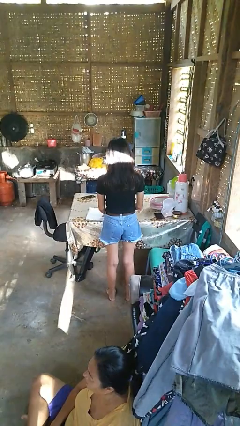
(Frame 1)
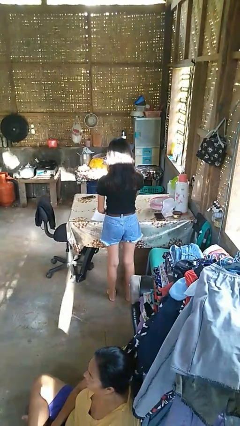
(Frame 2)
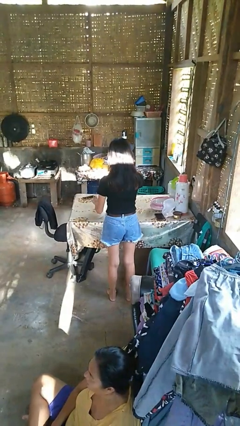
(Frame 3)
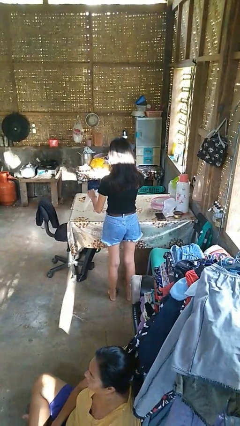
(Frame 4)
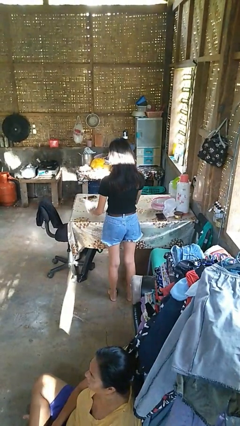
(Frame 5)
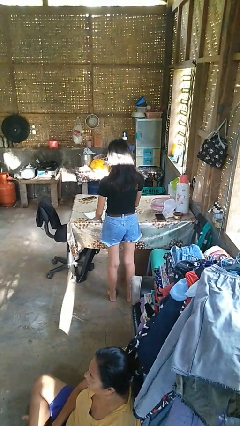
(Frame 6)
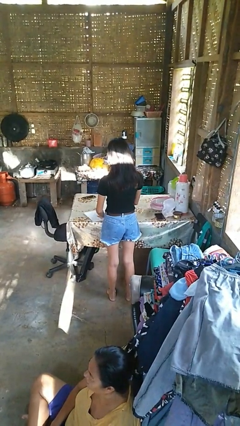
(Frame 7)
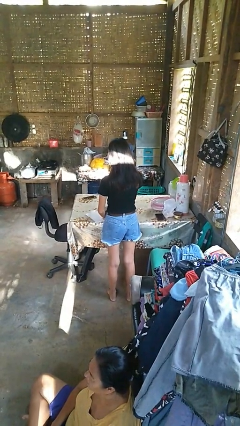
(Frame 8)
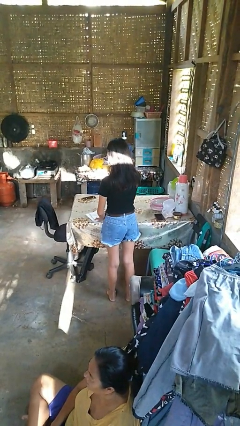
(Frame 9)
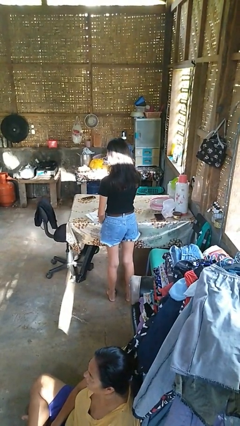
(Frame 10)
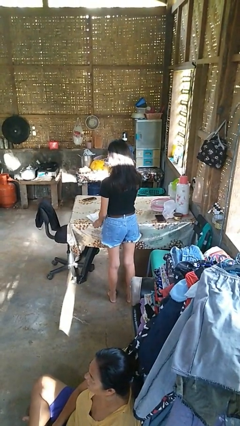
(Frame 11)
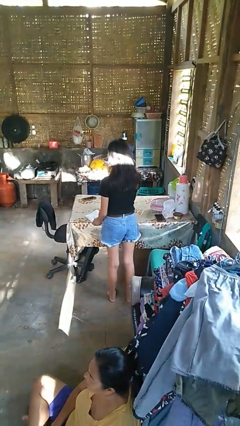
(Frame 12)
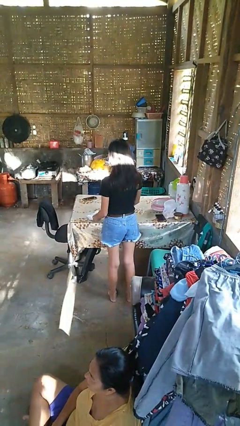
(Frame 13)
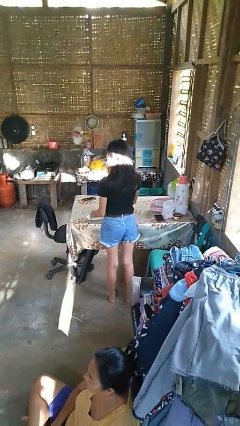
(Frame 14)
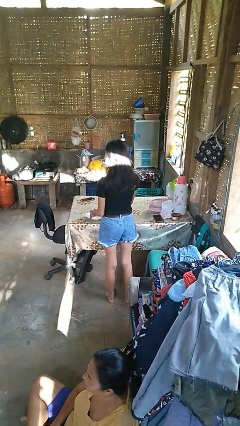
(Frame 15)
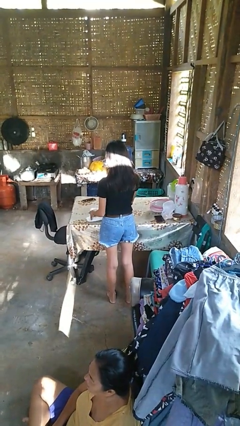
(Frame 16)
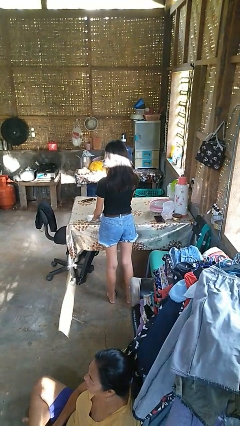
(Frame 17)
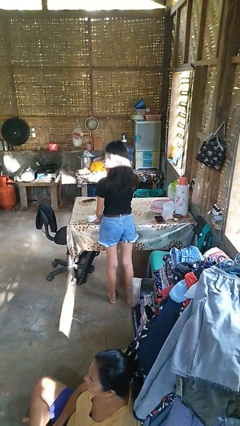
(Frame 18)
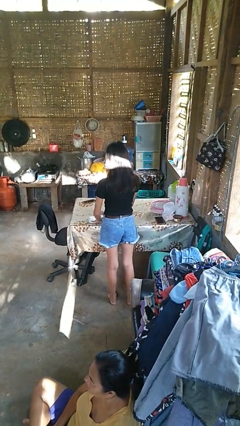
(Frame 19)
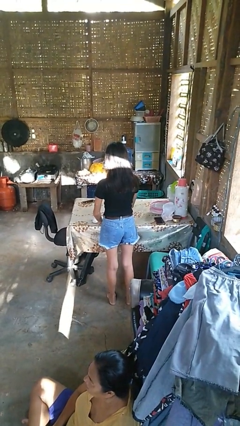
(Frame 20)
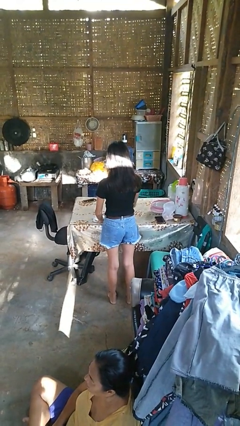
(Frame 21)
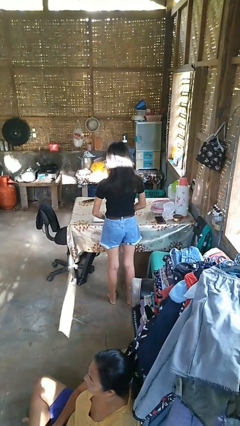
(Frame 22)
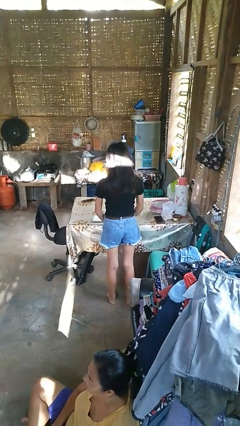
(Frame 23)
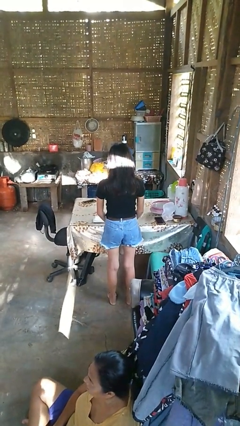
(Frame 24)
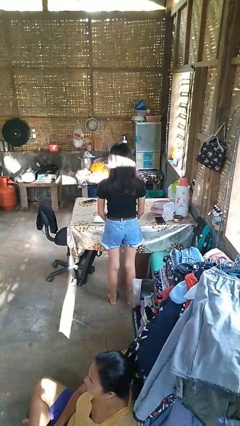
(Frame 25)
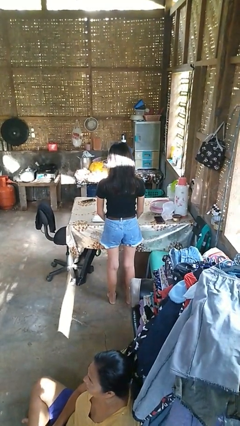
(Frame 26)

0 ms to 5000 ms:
person folds tablecloth

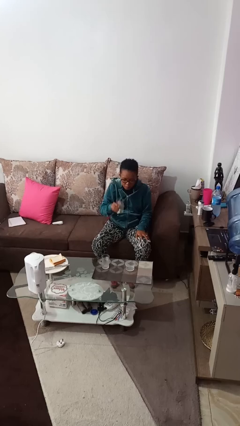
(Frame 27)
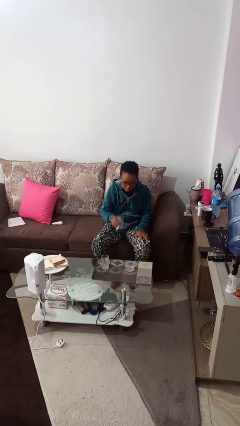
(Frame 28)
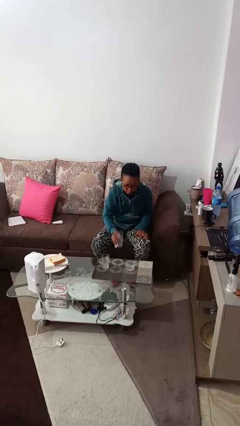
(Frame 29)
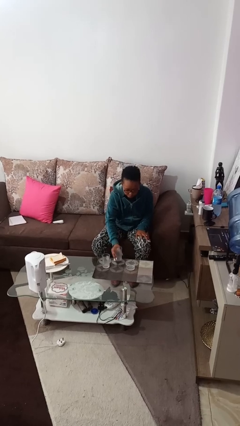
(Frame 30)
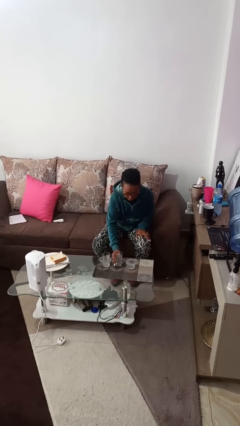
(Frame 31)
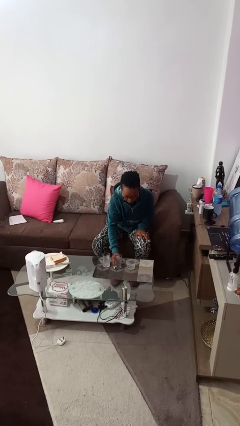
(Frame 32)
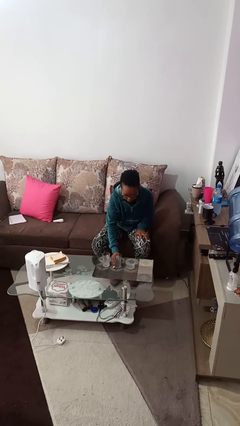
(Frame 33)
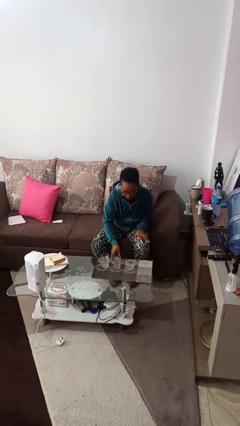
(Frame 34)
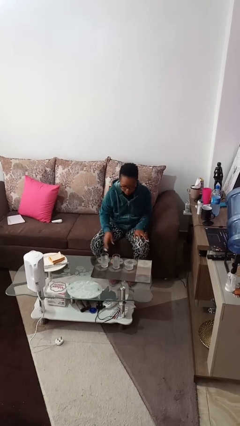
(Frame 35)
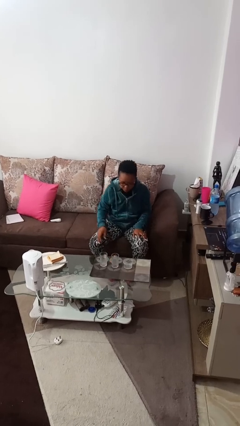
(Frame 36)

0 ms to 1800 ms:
person puts down object on table

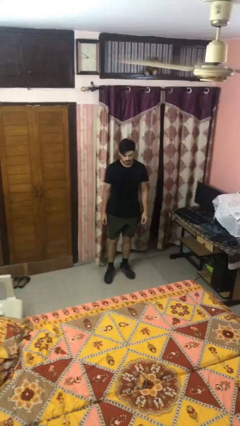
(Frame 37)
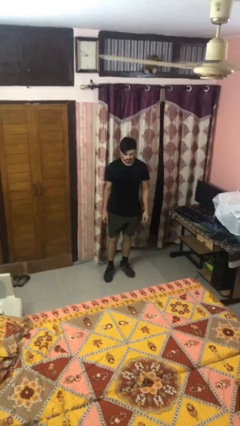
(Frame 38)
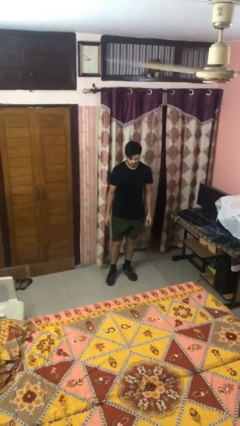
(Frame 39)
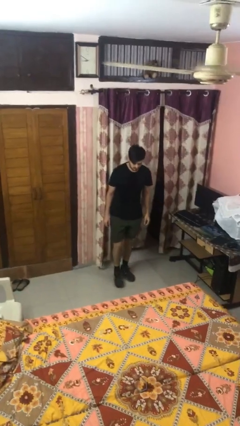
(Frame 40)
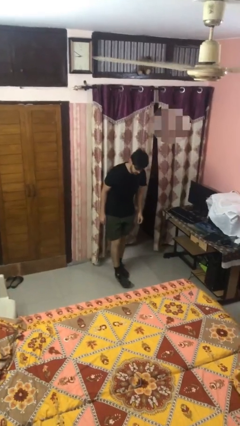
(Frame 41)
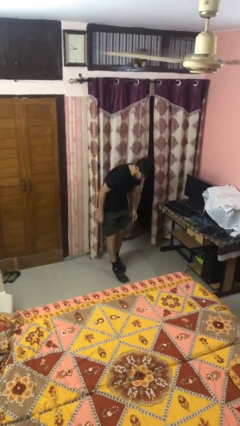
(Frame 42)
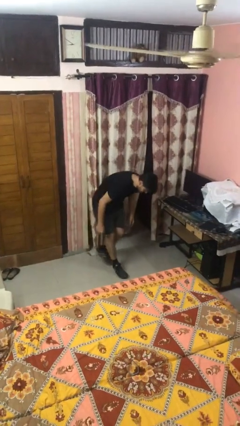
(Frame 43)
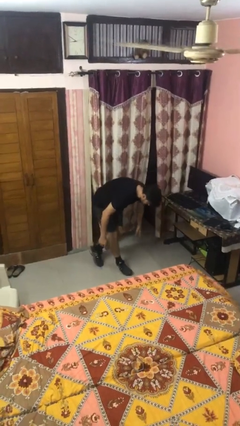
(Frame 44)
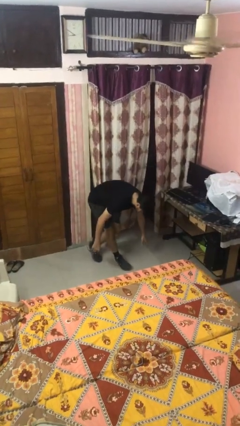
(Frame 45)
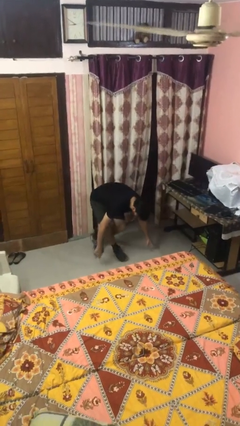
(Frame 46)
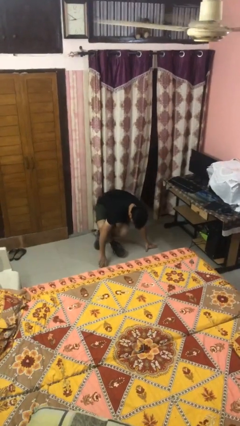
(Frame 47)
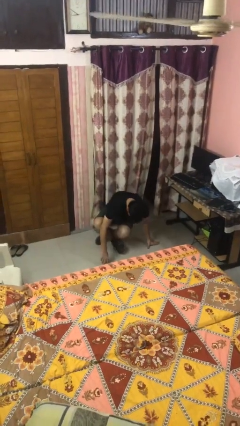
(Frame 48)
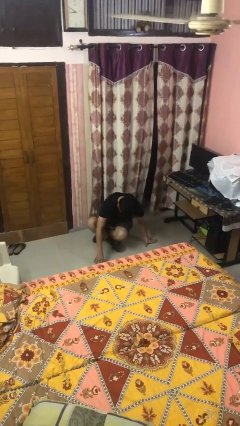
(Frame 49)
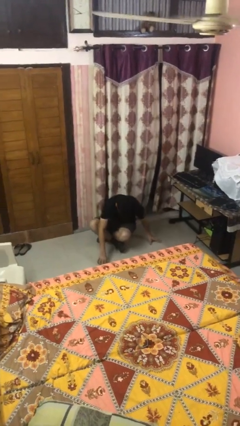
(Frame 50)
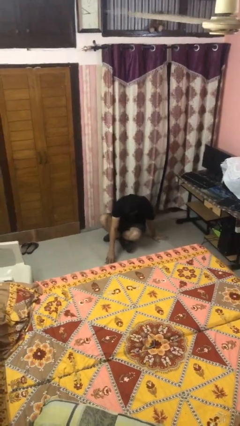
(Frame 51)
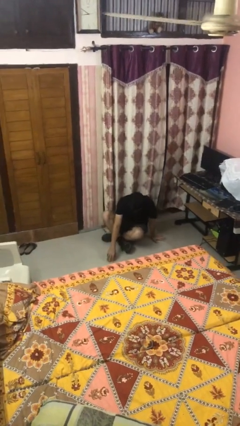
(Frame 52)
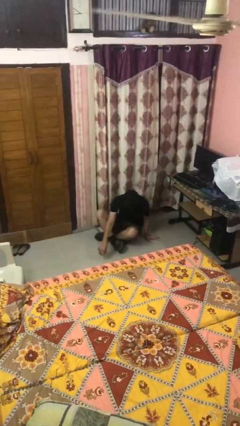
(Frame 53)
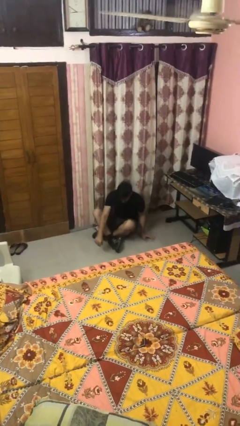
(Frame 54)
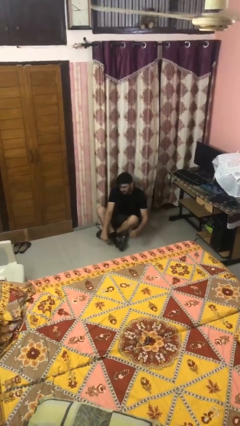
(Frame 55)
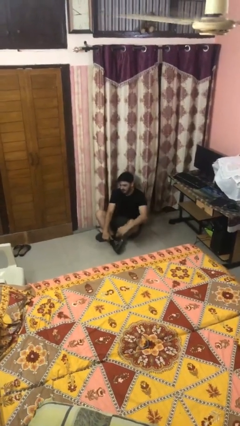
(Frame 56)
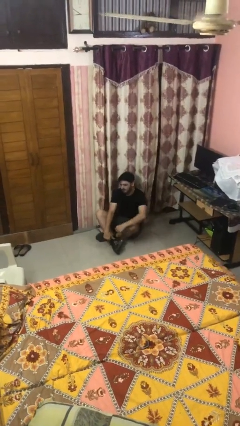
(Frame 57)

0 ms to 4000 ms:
person sits crisscross

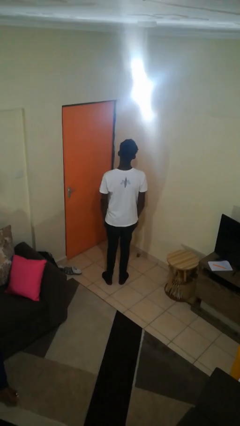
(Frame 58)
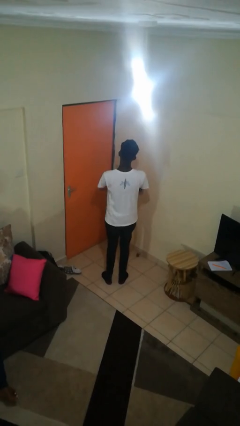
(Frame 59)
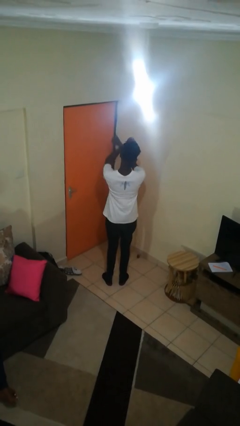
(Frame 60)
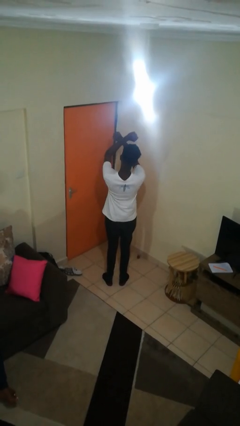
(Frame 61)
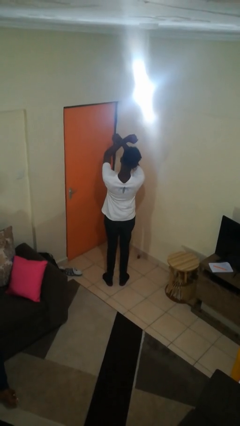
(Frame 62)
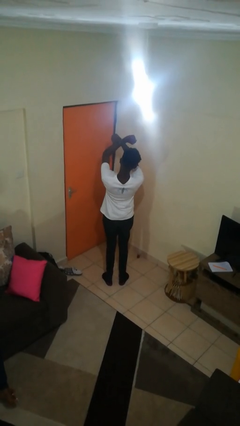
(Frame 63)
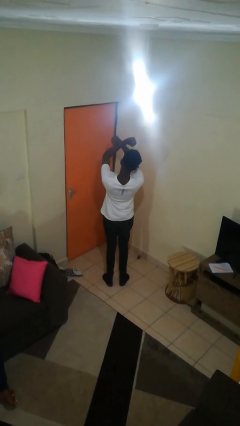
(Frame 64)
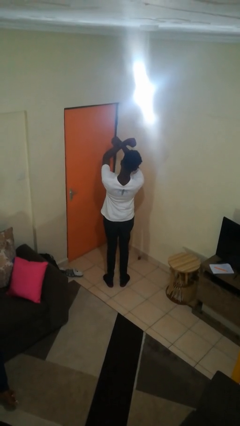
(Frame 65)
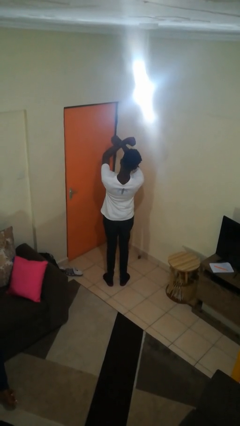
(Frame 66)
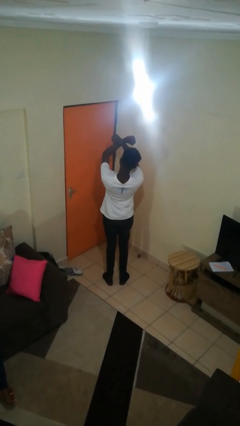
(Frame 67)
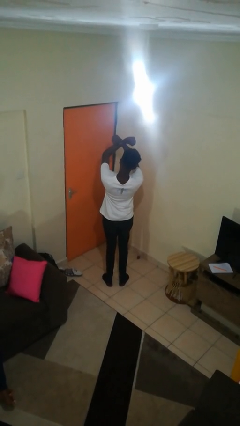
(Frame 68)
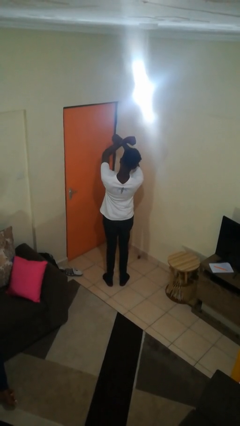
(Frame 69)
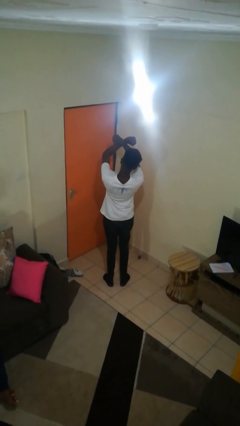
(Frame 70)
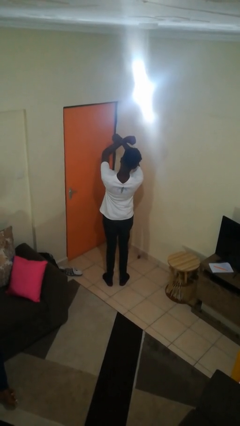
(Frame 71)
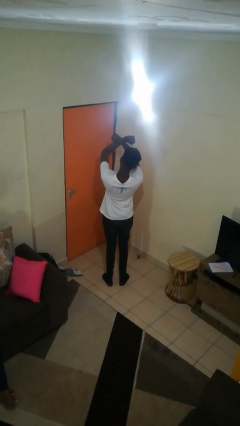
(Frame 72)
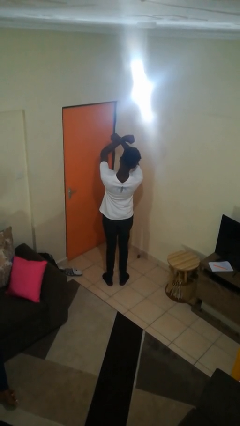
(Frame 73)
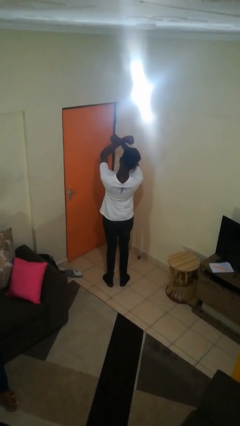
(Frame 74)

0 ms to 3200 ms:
person gestures arms x

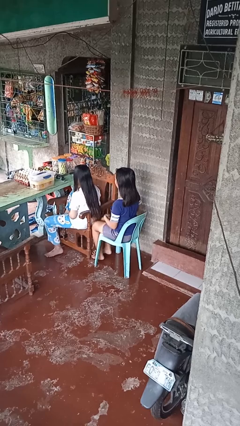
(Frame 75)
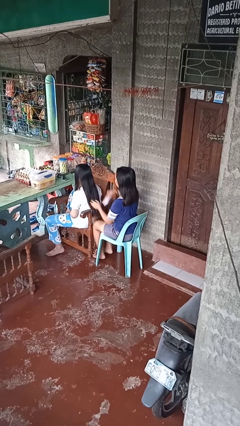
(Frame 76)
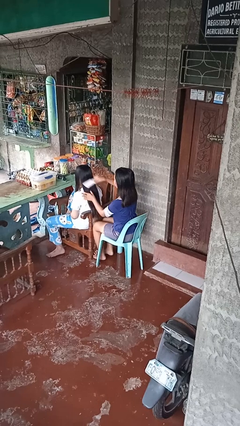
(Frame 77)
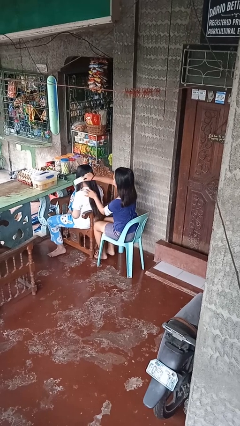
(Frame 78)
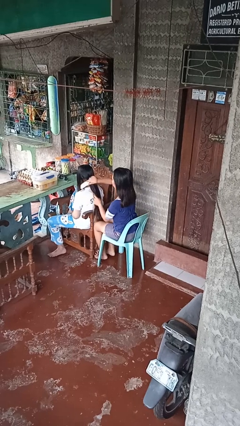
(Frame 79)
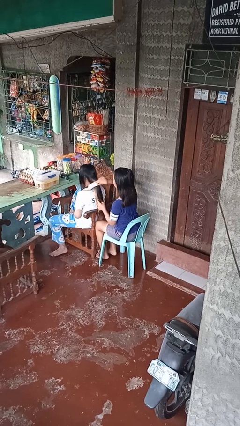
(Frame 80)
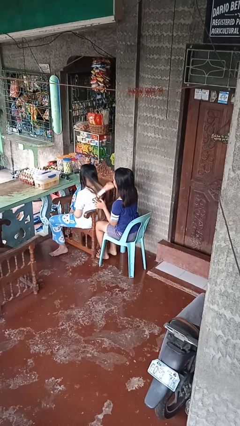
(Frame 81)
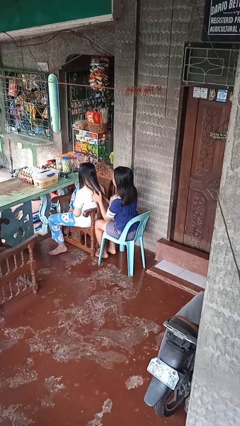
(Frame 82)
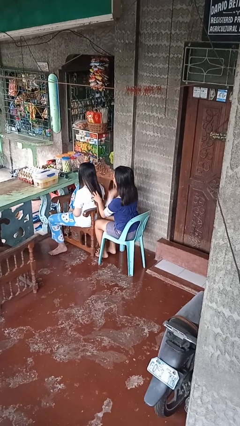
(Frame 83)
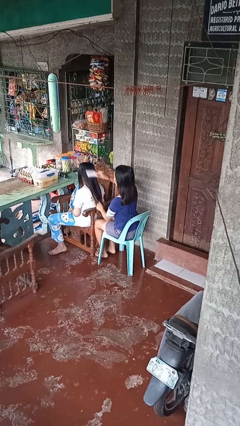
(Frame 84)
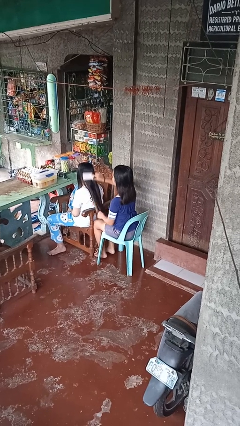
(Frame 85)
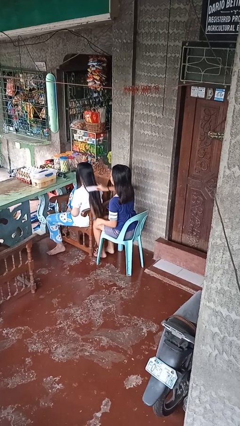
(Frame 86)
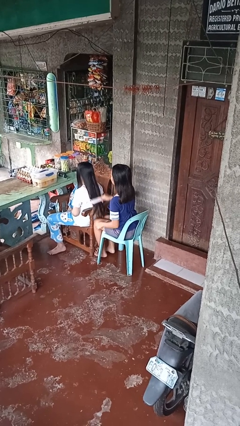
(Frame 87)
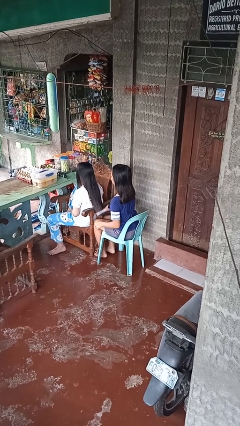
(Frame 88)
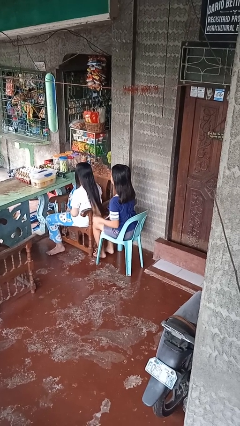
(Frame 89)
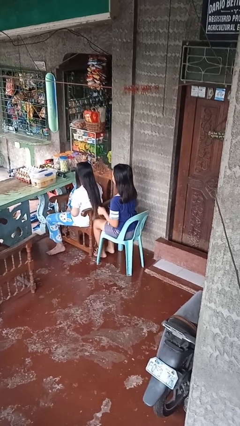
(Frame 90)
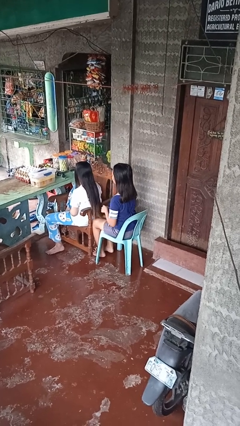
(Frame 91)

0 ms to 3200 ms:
person brushes hair of person

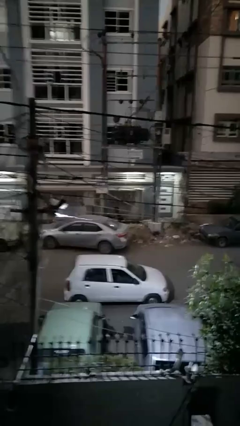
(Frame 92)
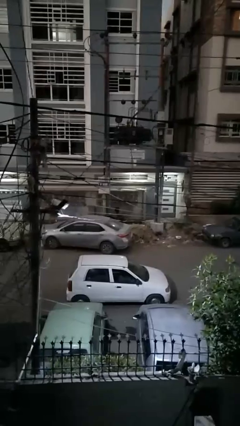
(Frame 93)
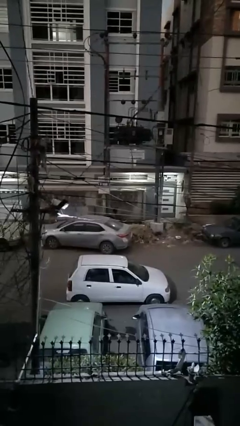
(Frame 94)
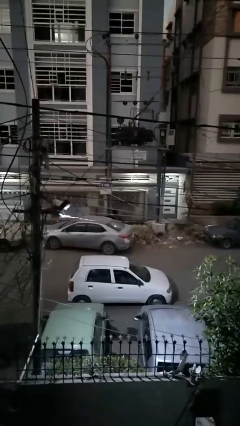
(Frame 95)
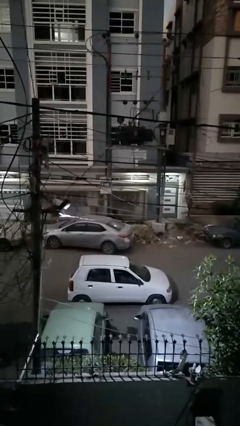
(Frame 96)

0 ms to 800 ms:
person loads car
